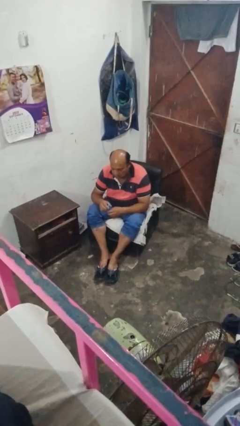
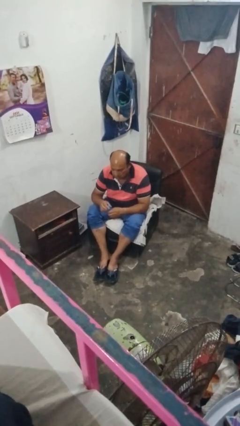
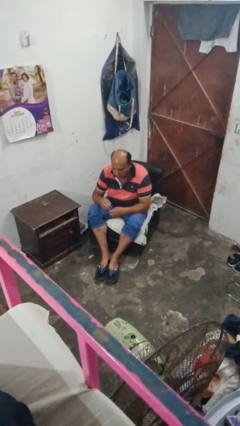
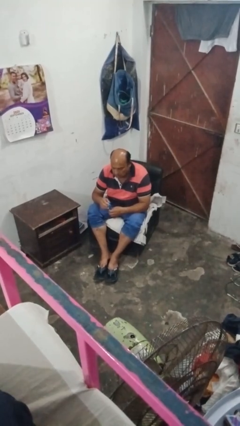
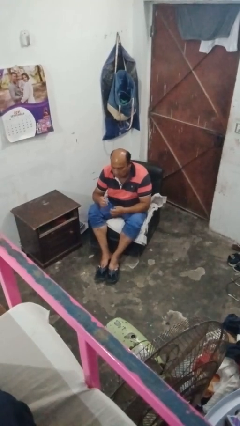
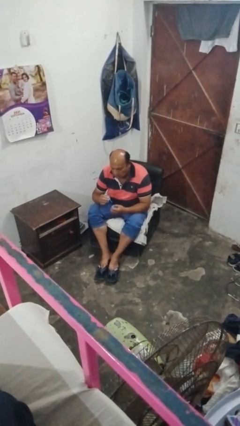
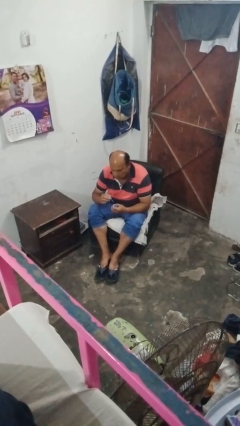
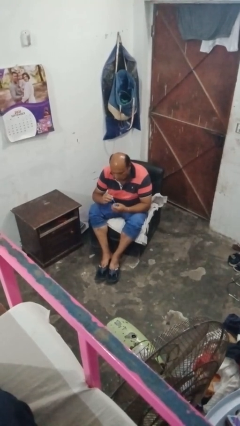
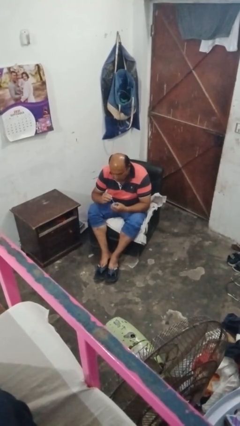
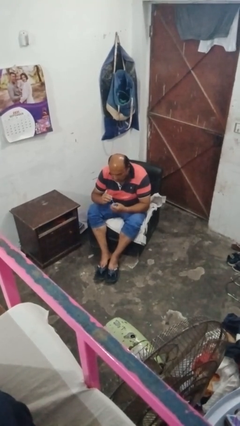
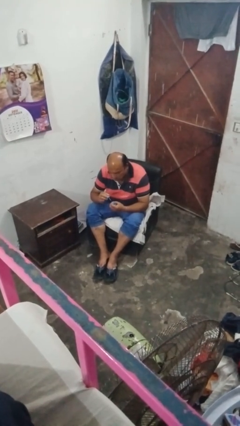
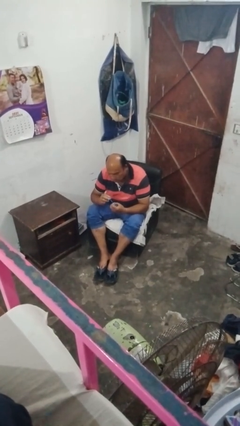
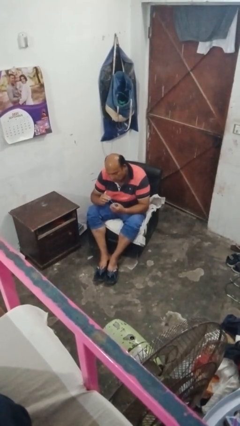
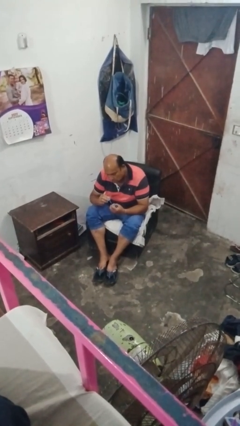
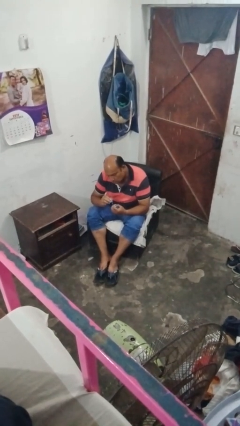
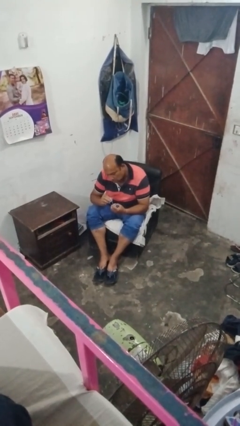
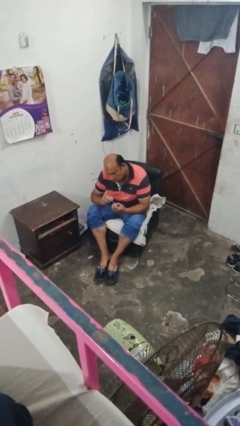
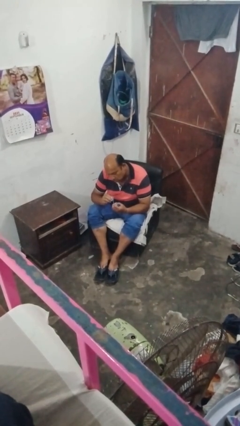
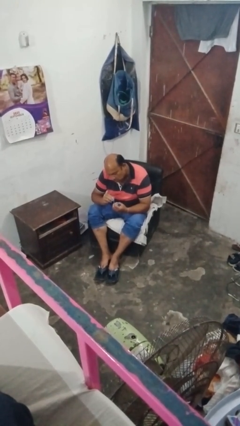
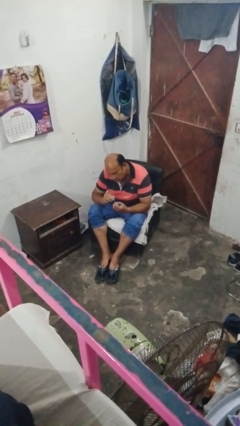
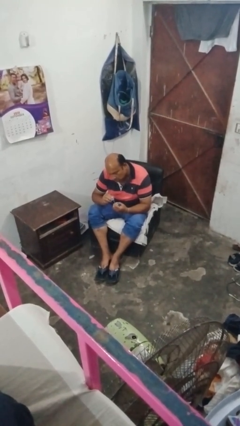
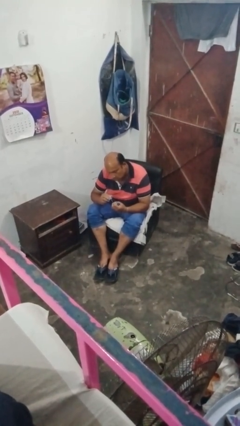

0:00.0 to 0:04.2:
person paints fingernails

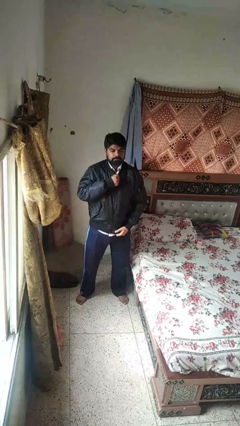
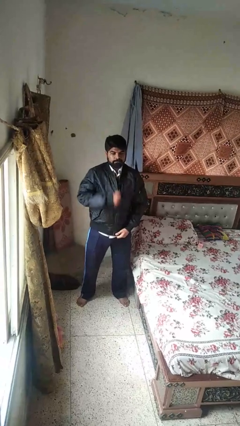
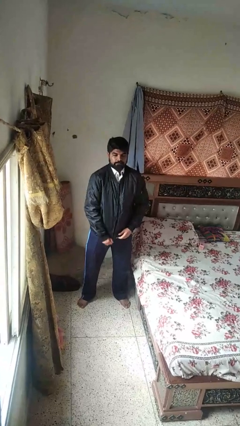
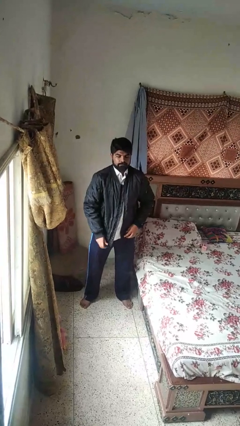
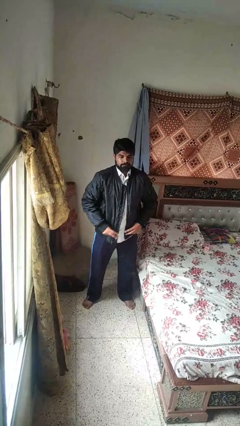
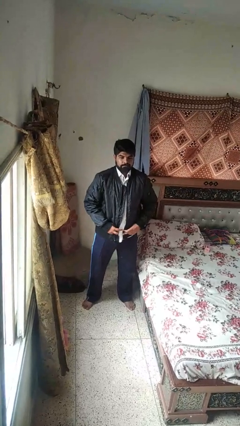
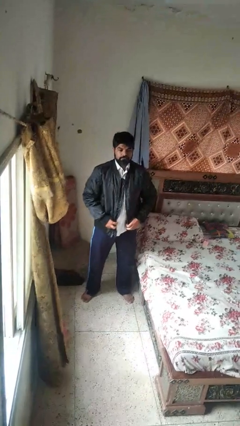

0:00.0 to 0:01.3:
person unzips jacket

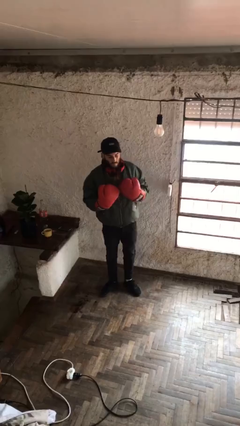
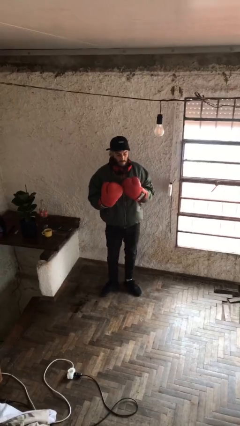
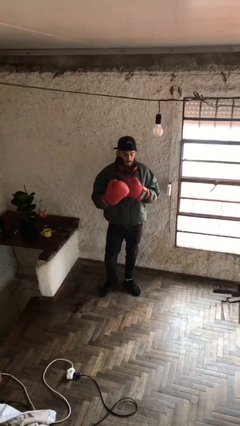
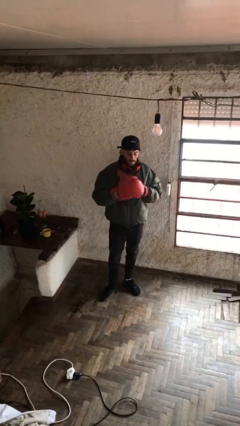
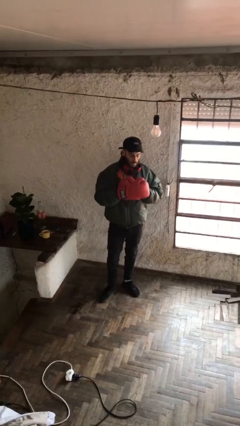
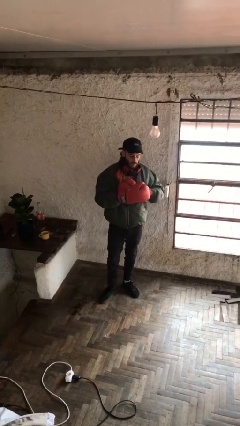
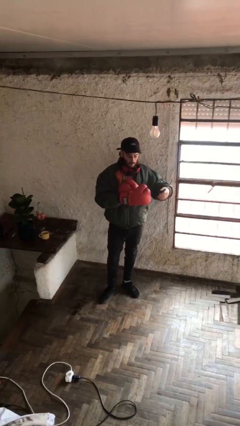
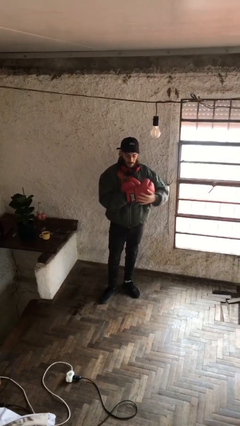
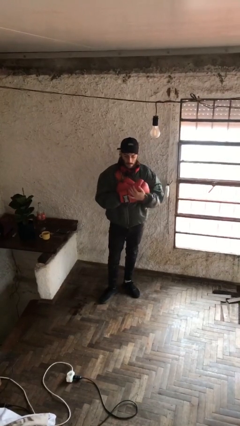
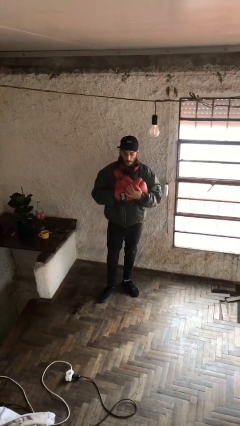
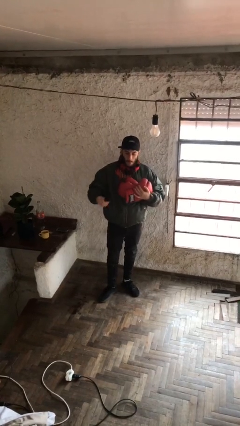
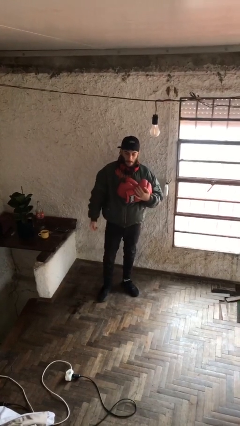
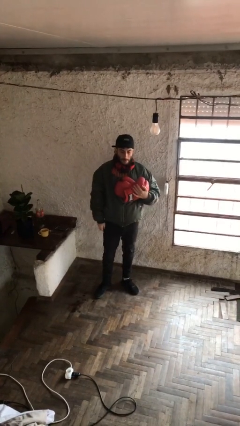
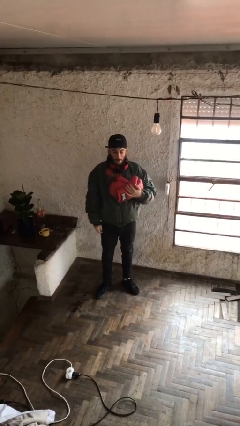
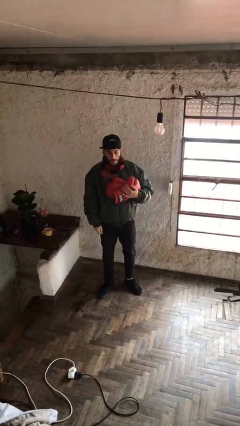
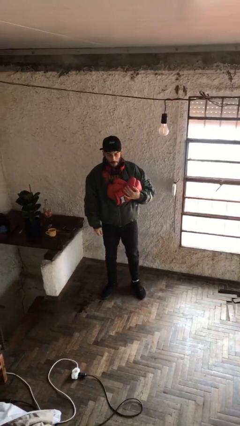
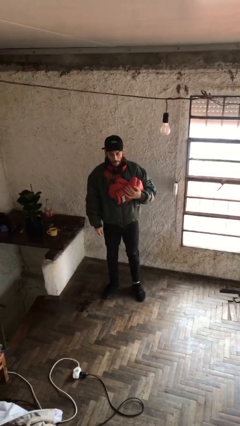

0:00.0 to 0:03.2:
person takes off gloves

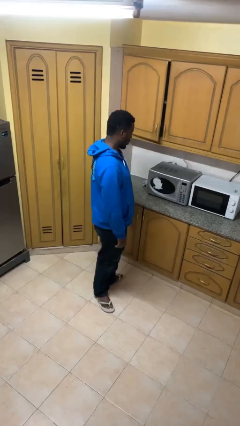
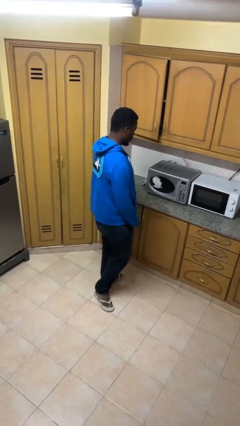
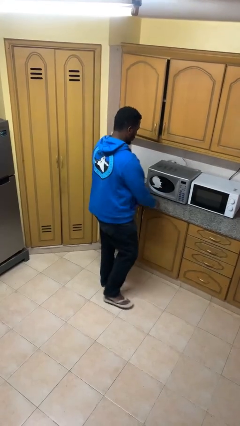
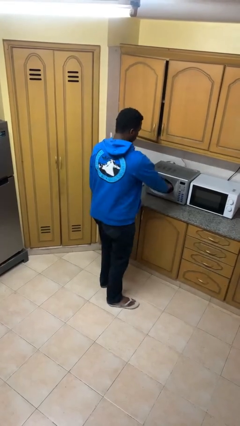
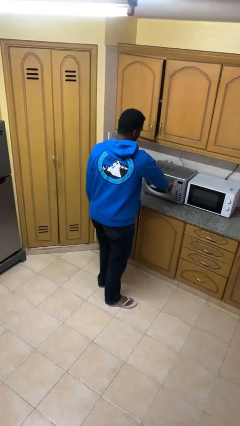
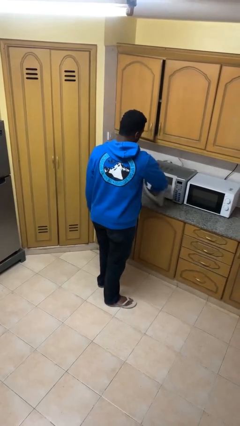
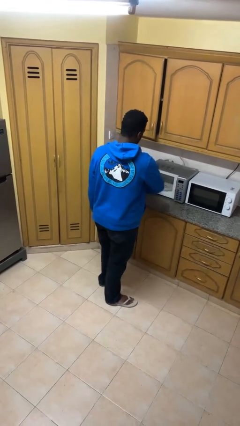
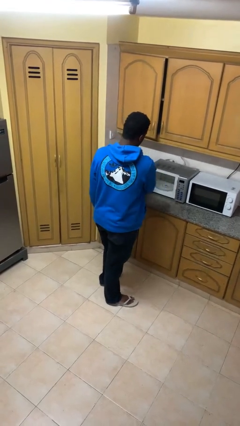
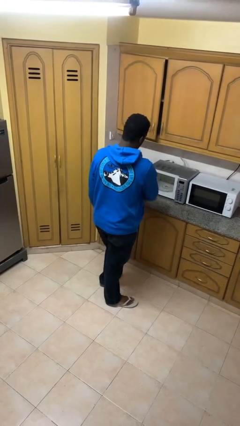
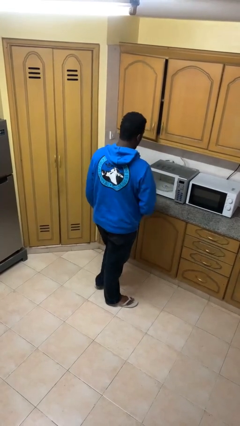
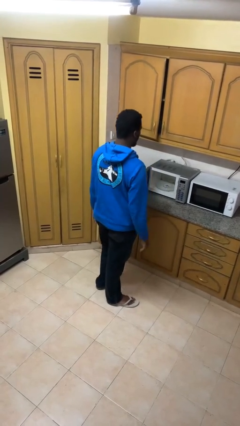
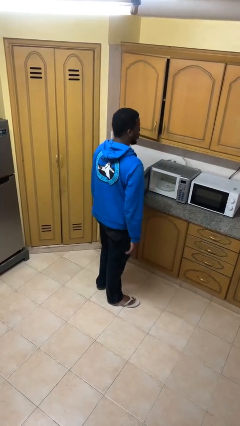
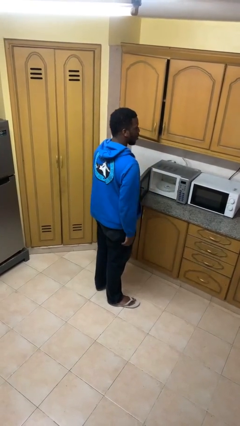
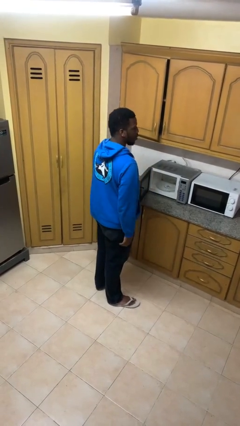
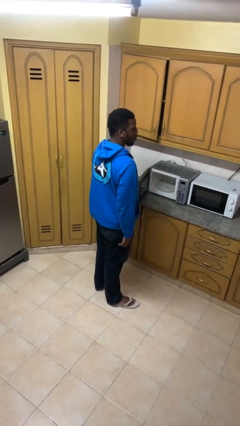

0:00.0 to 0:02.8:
person opens microwave

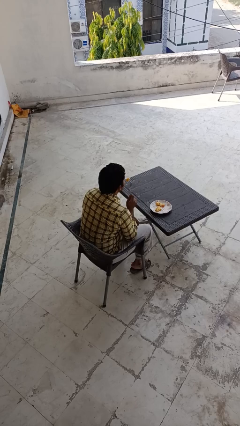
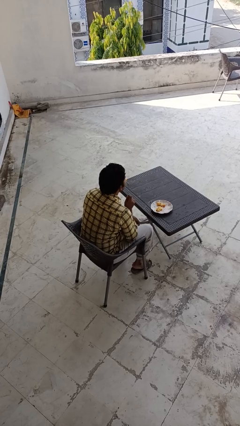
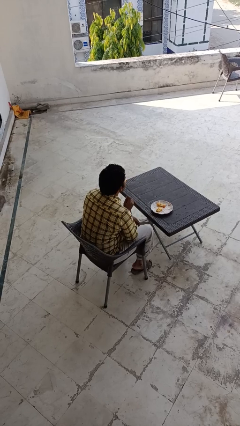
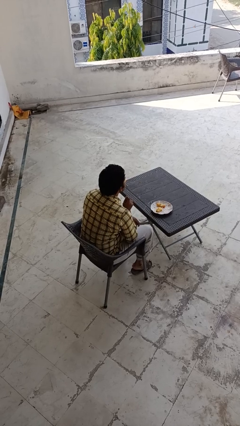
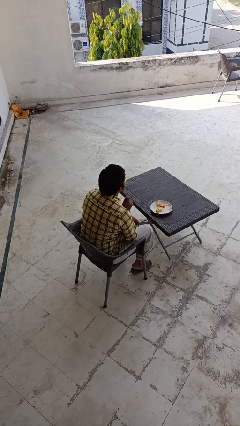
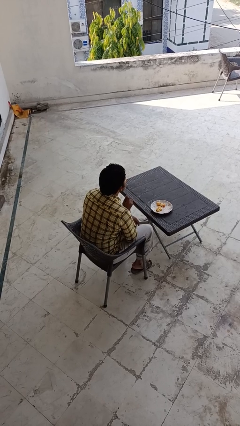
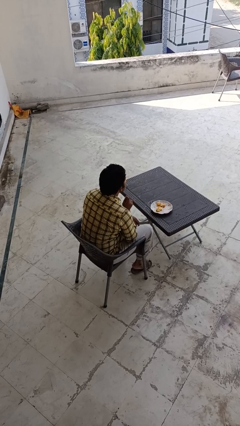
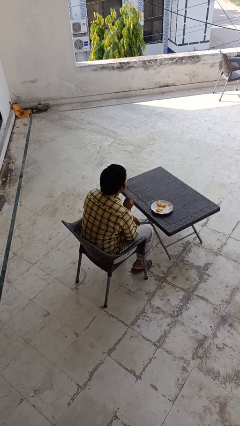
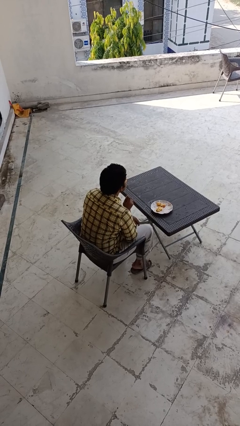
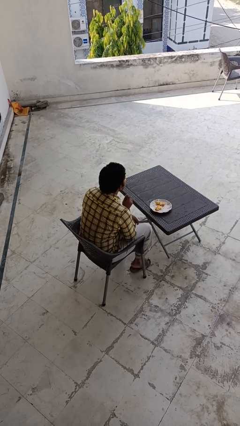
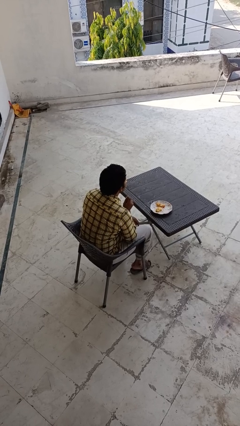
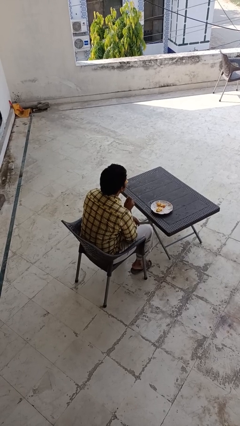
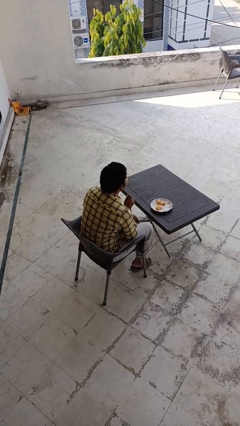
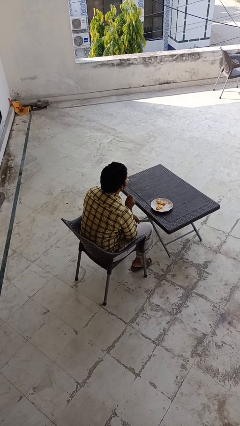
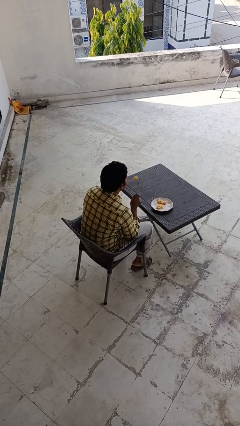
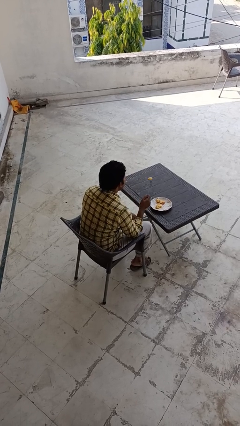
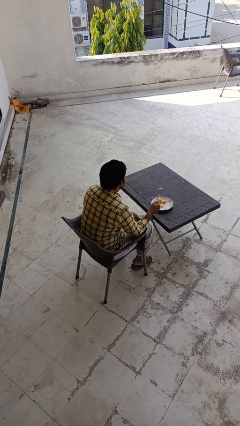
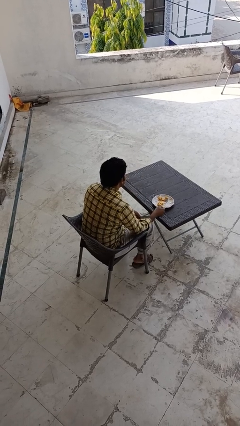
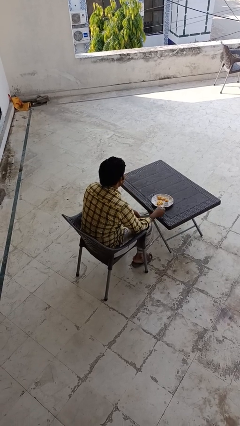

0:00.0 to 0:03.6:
person eats with utensil

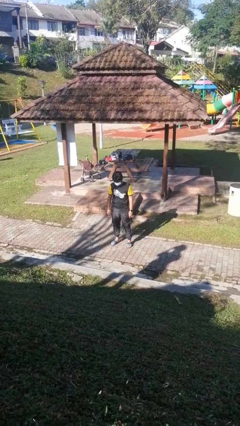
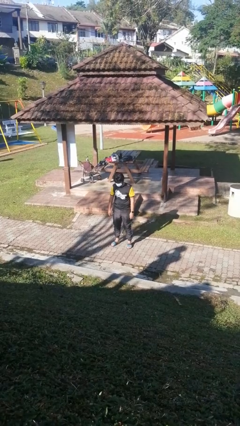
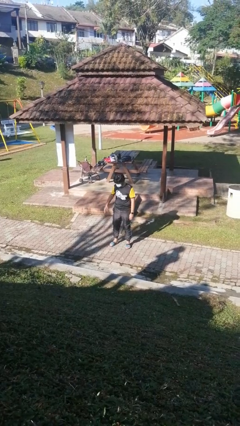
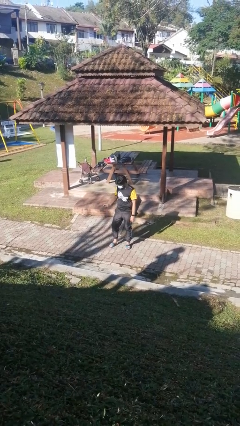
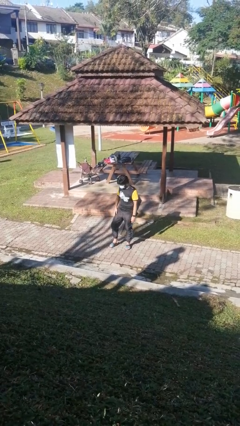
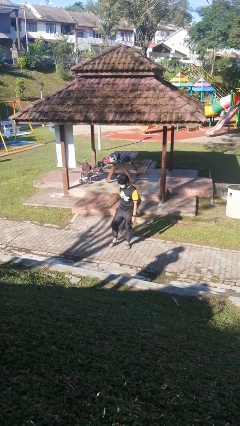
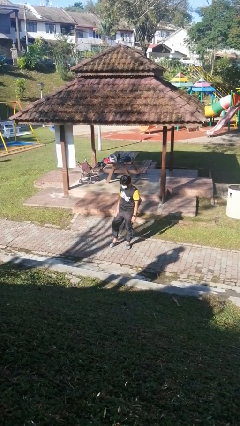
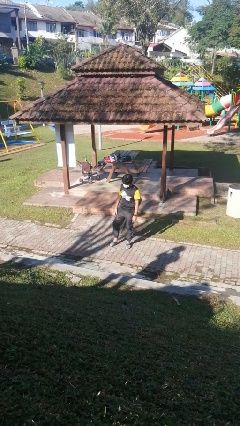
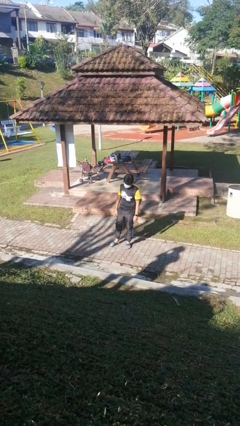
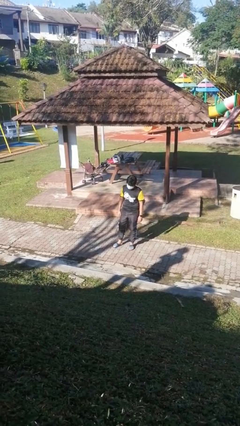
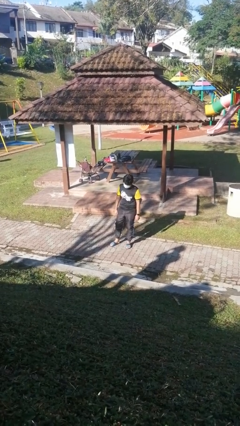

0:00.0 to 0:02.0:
person slaps hands on thighs

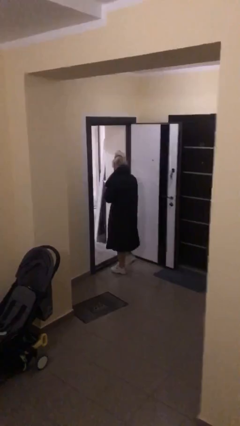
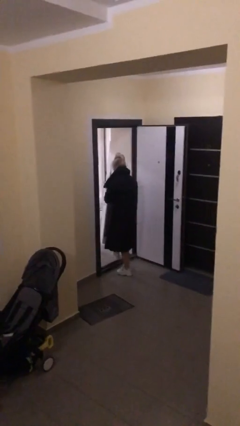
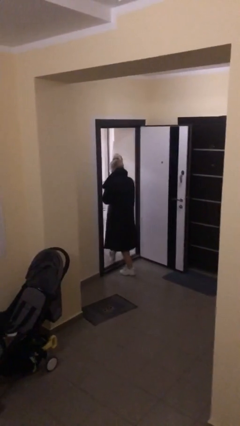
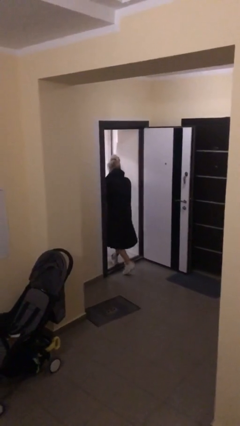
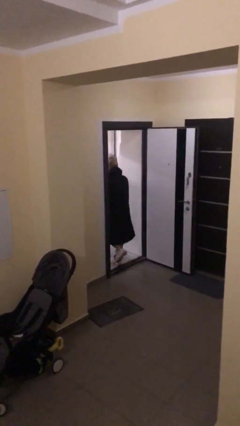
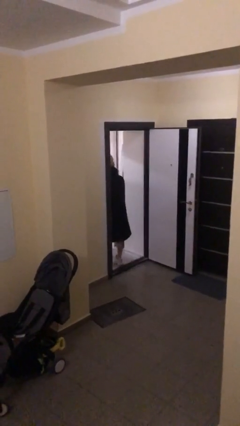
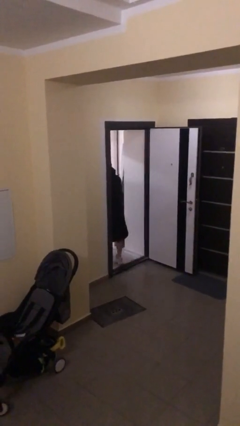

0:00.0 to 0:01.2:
person exits scene through structure
